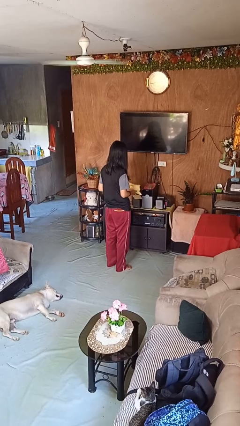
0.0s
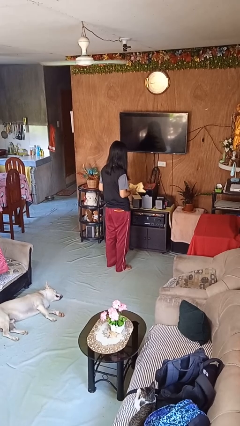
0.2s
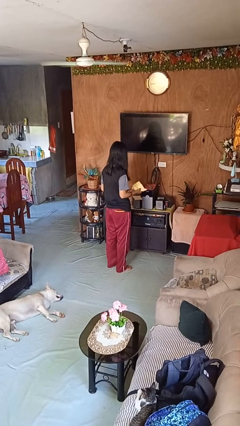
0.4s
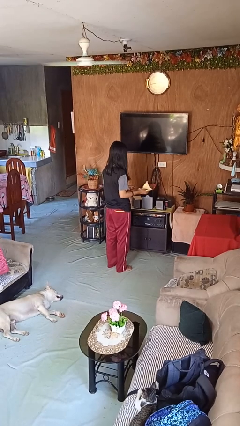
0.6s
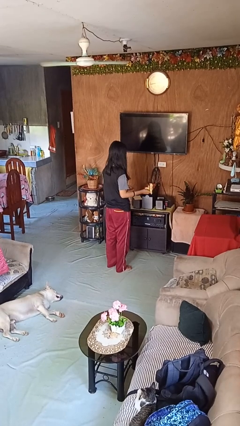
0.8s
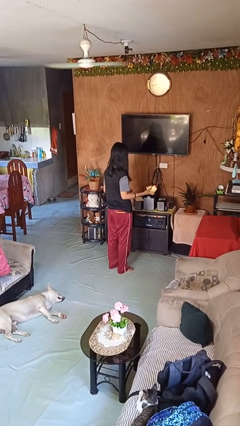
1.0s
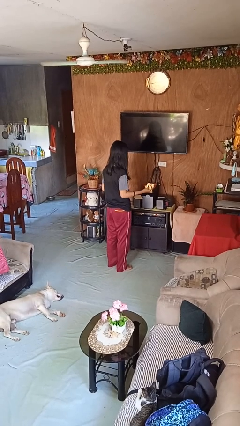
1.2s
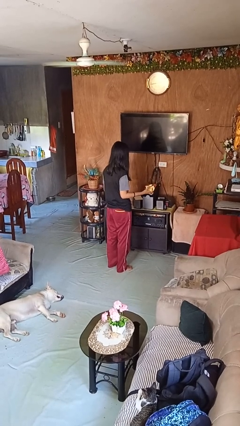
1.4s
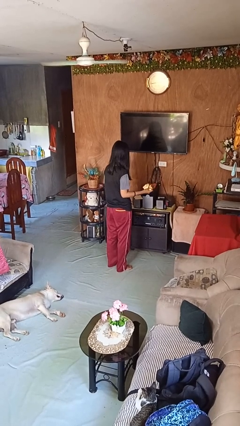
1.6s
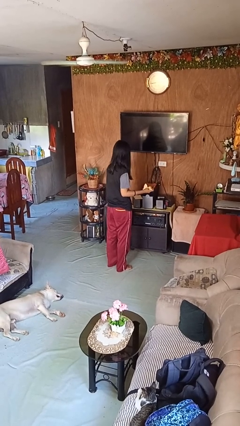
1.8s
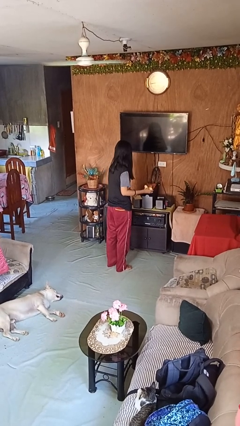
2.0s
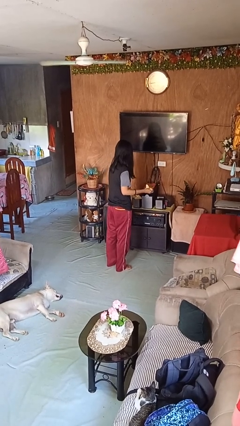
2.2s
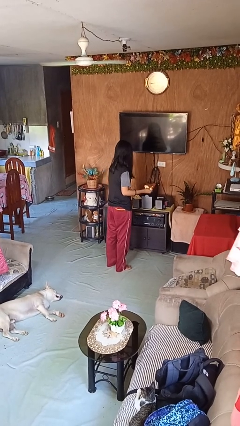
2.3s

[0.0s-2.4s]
person crumples paper

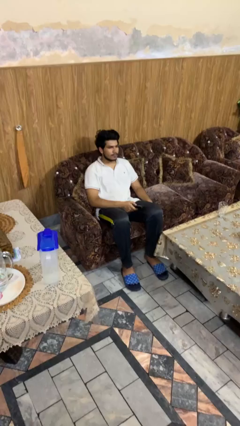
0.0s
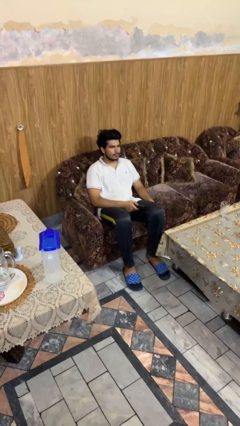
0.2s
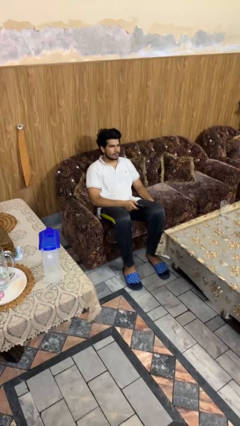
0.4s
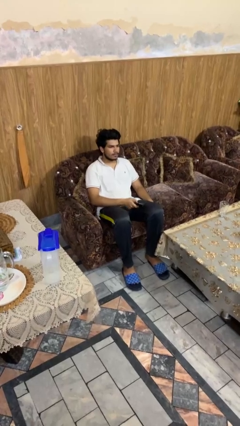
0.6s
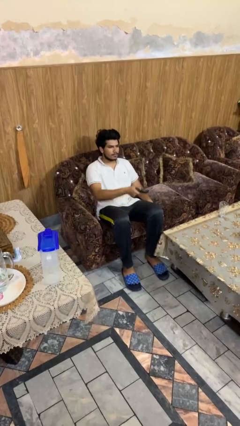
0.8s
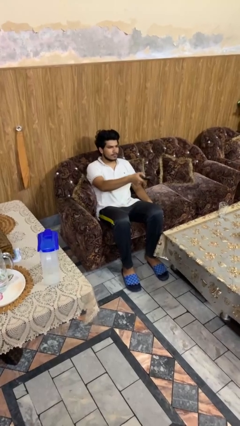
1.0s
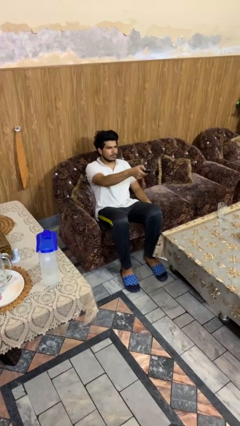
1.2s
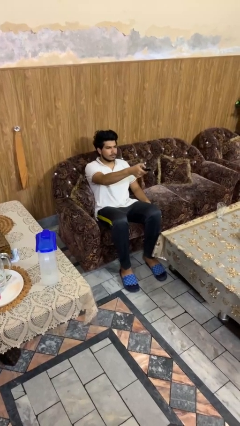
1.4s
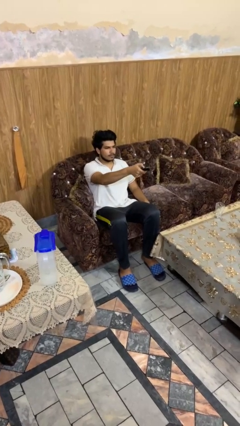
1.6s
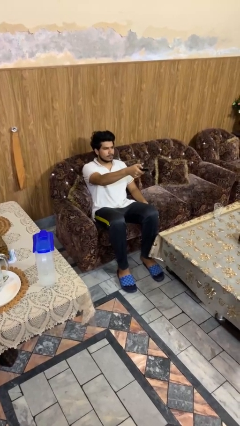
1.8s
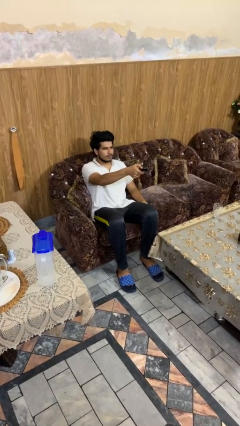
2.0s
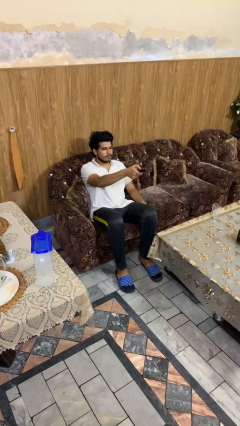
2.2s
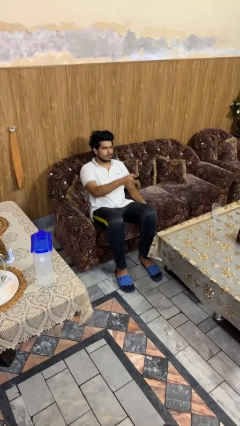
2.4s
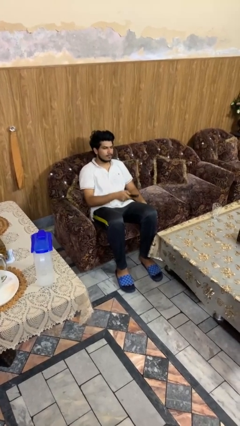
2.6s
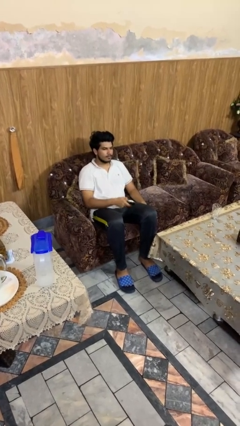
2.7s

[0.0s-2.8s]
person uses television remote

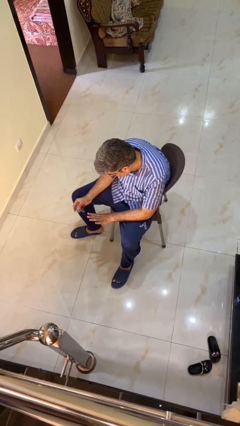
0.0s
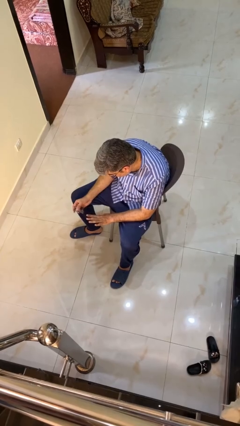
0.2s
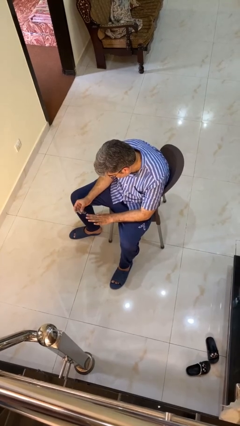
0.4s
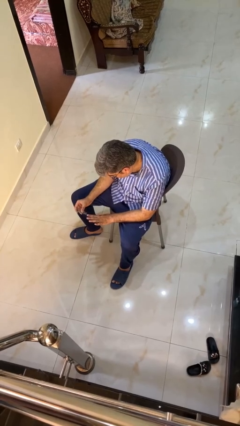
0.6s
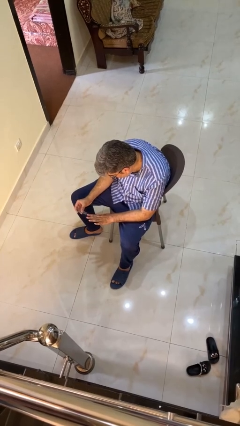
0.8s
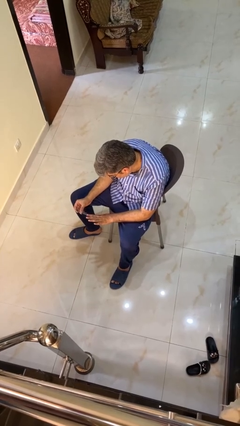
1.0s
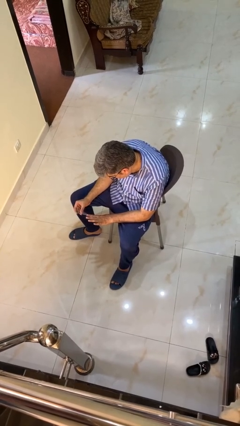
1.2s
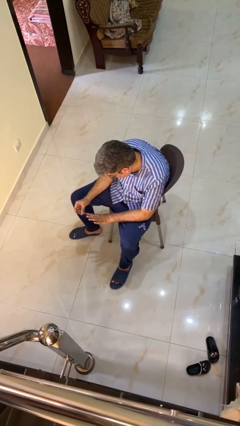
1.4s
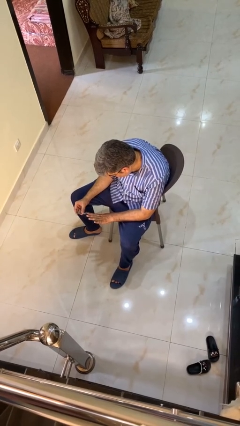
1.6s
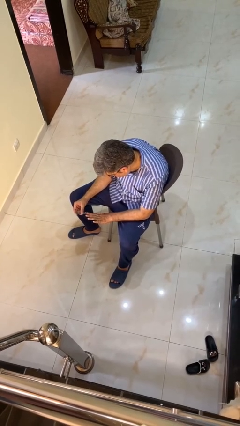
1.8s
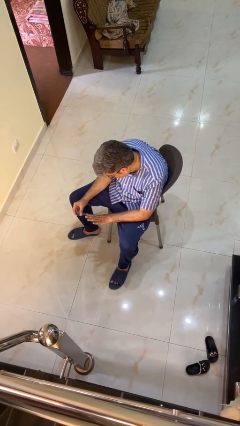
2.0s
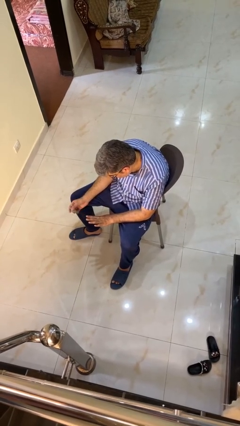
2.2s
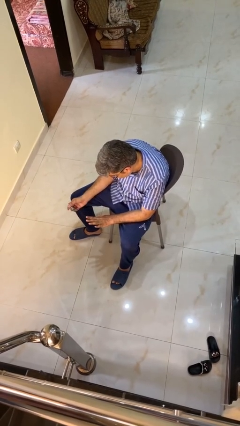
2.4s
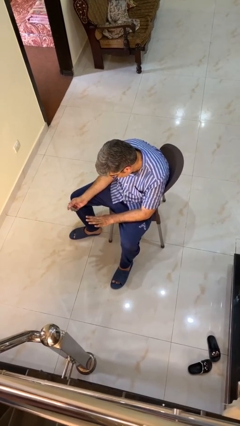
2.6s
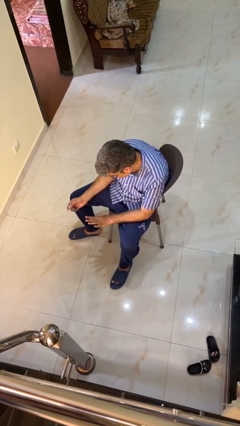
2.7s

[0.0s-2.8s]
person clips fingernails

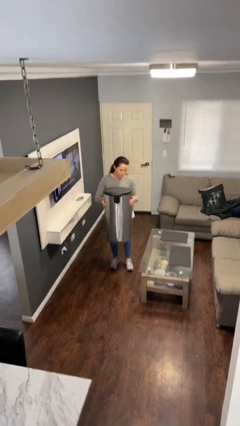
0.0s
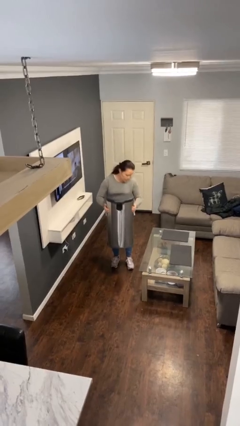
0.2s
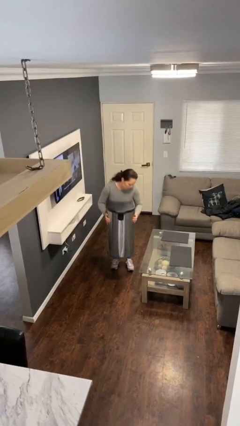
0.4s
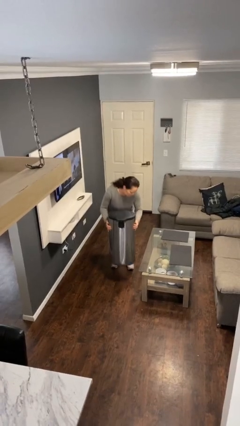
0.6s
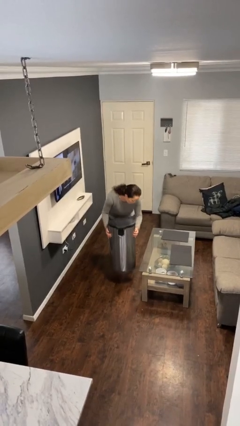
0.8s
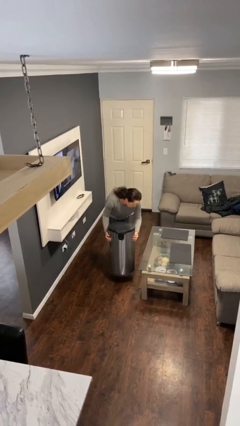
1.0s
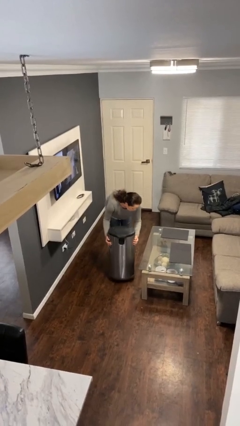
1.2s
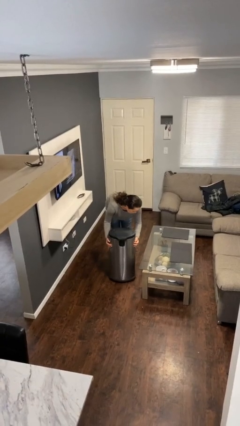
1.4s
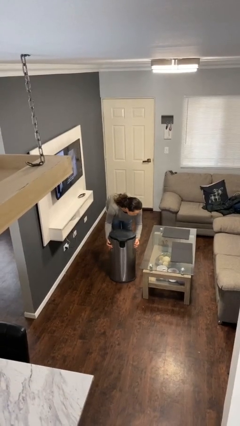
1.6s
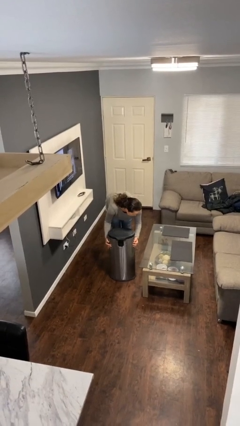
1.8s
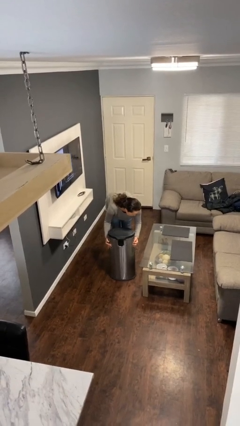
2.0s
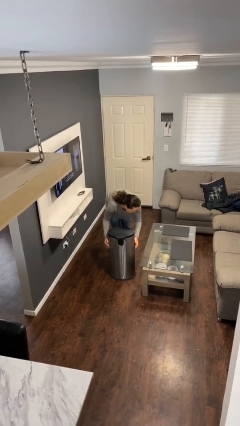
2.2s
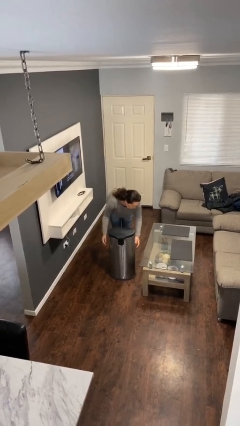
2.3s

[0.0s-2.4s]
person puts down object on floor

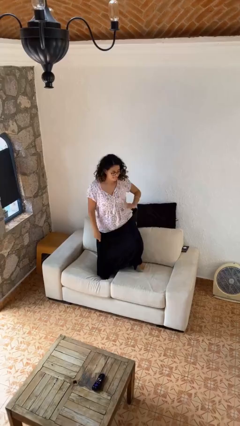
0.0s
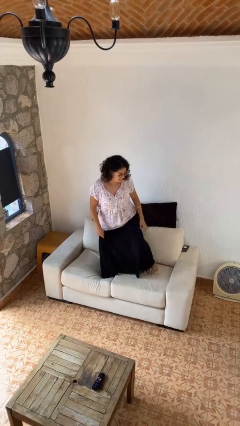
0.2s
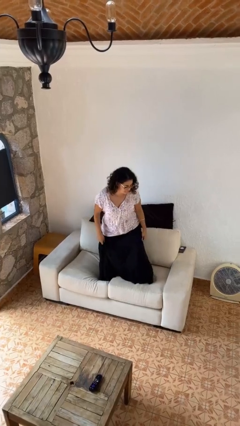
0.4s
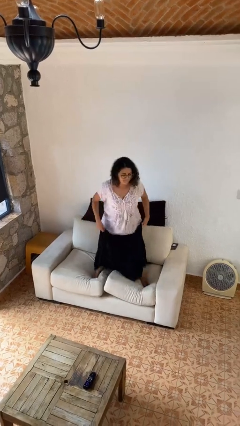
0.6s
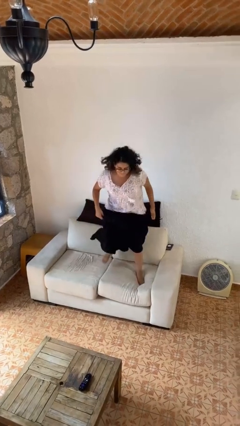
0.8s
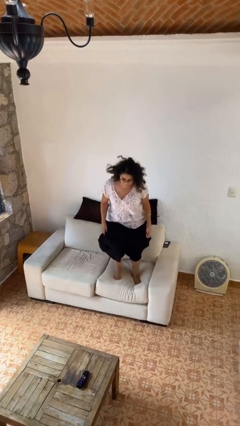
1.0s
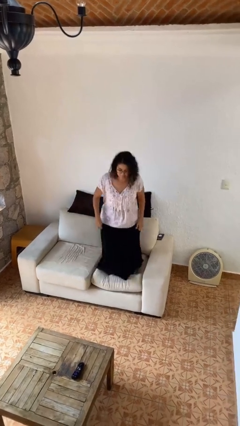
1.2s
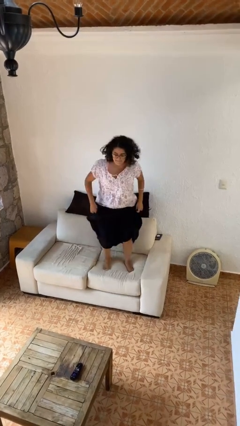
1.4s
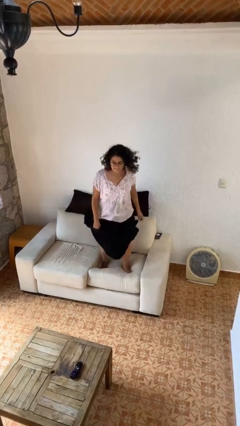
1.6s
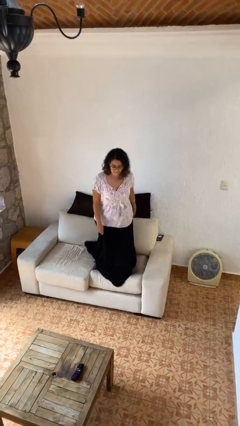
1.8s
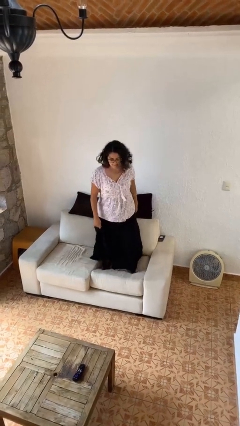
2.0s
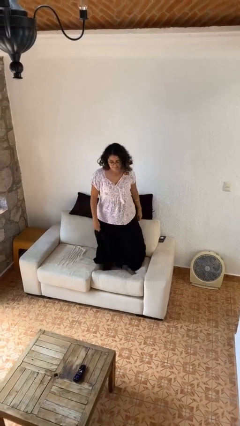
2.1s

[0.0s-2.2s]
person jumps on couch

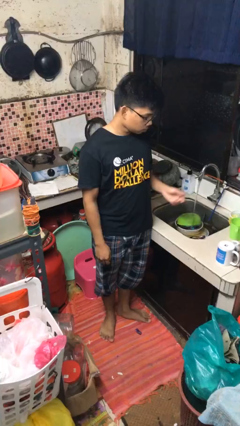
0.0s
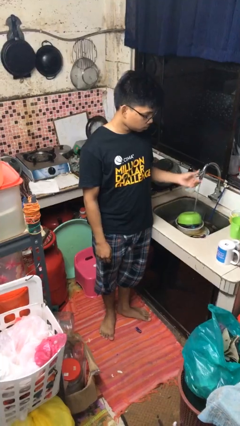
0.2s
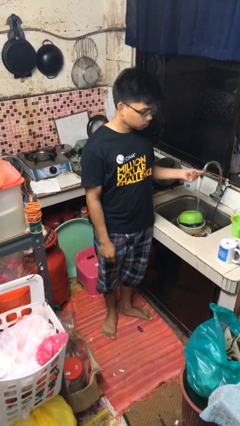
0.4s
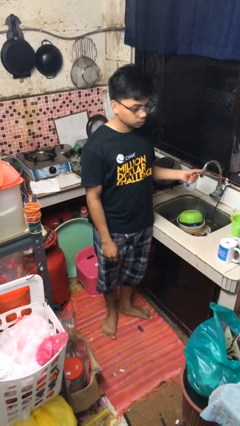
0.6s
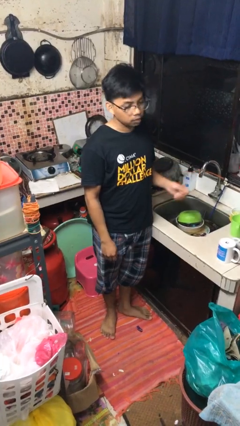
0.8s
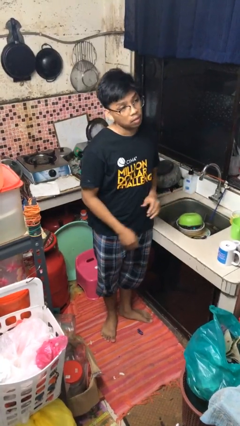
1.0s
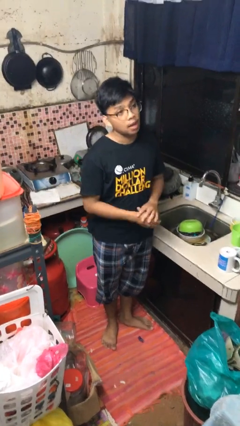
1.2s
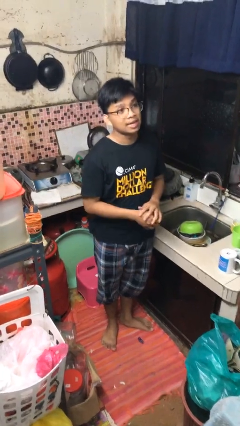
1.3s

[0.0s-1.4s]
person turns off faucet

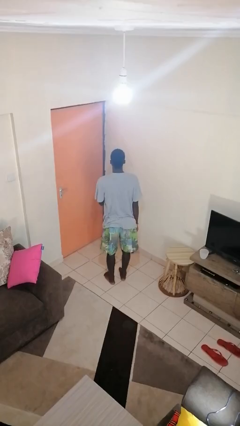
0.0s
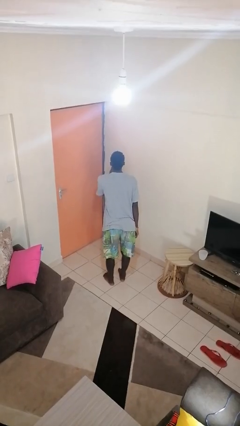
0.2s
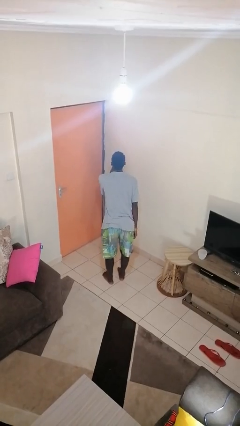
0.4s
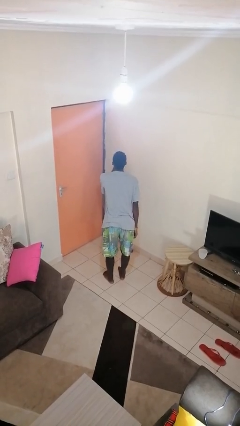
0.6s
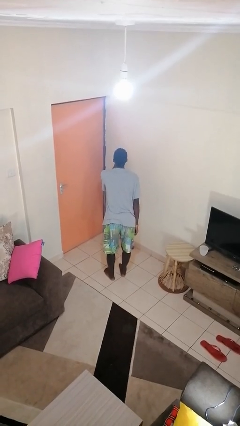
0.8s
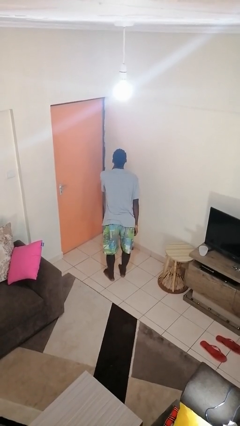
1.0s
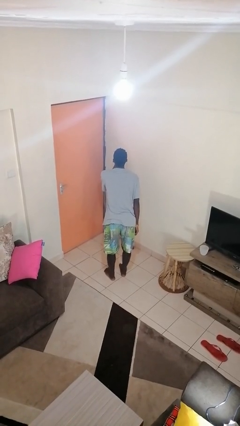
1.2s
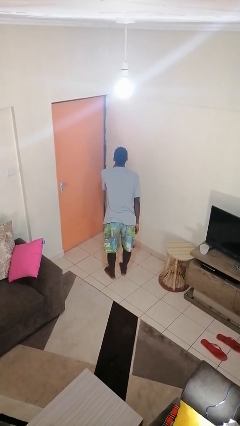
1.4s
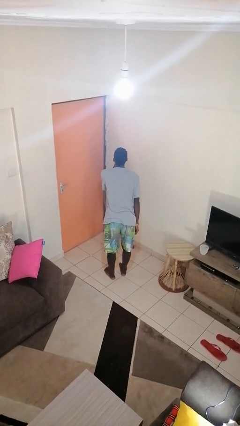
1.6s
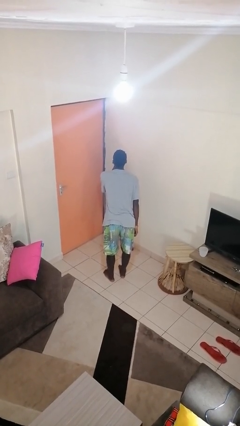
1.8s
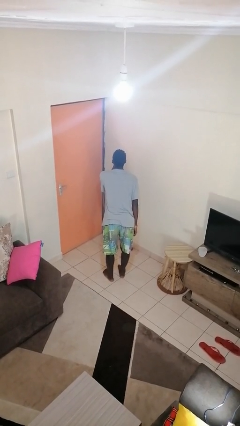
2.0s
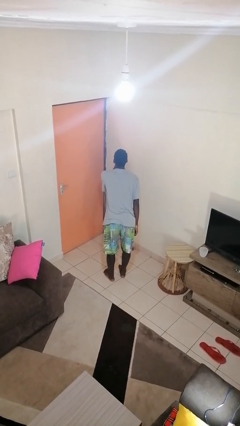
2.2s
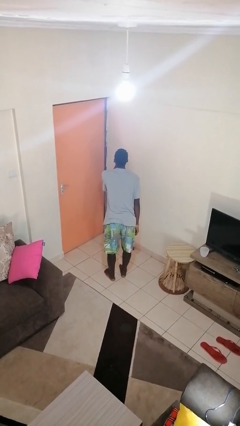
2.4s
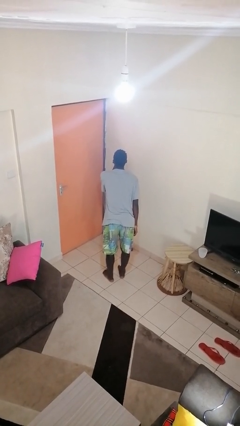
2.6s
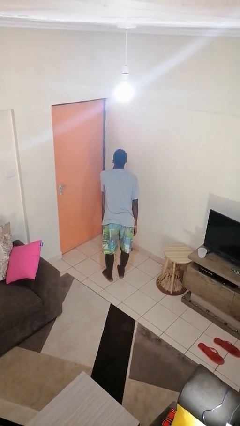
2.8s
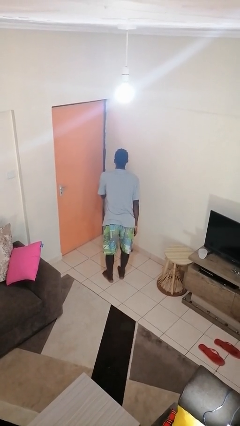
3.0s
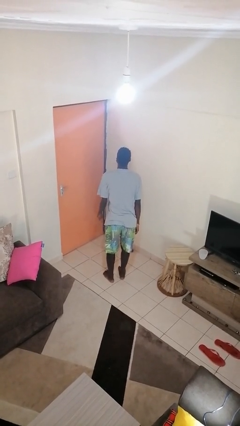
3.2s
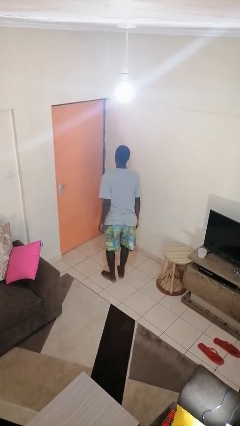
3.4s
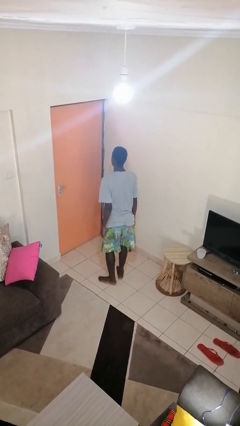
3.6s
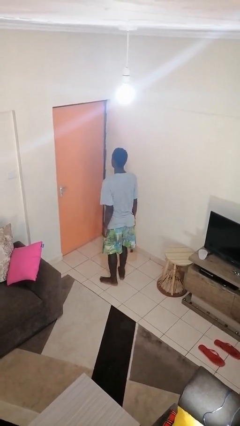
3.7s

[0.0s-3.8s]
person gestures be quiet
